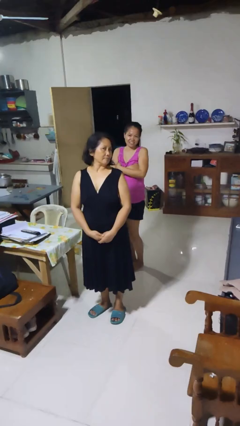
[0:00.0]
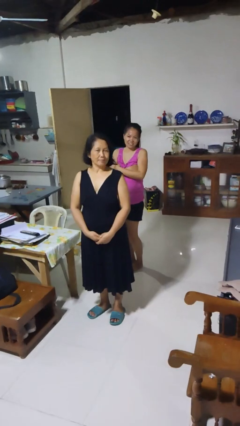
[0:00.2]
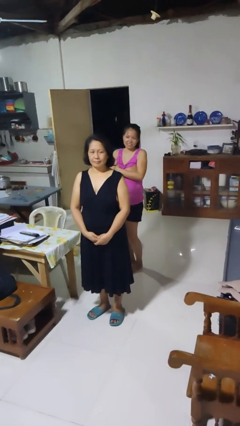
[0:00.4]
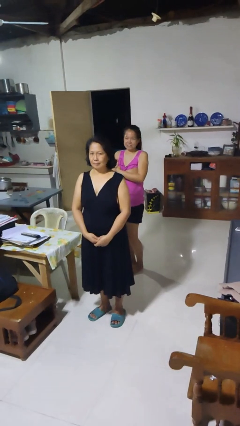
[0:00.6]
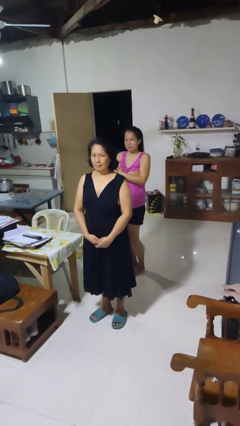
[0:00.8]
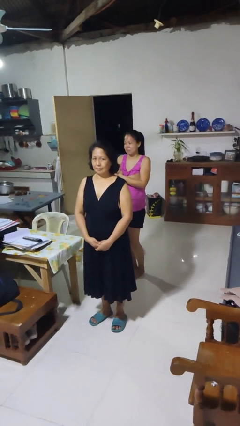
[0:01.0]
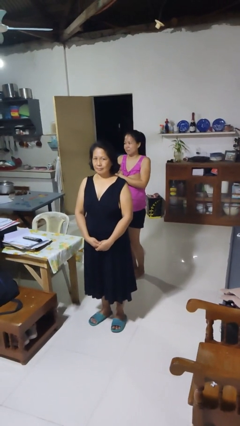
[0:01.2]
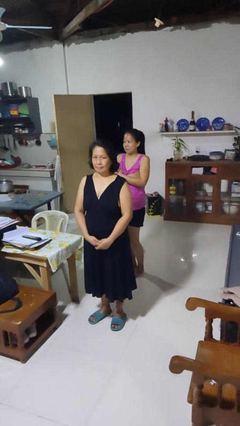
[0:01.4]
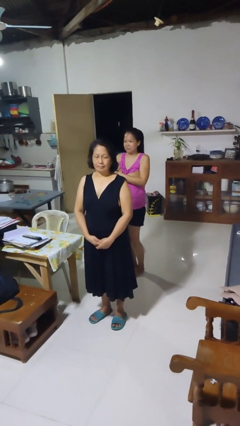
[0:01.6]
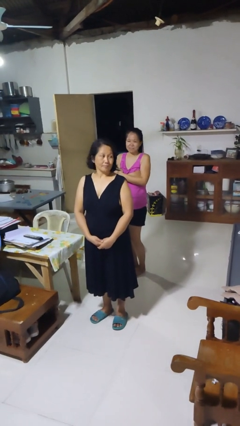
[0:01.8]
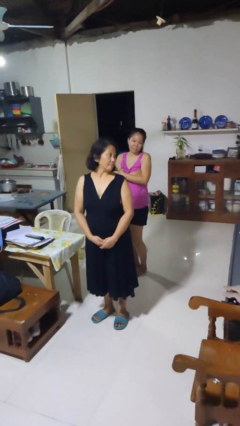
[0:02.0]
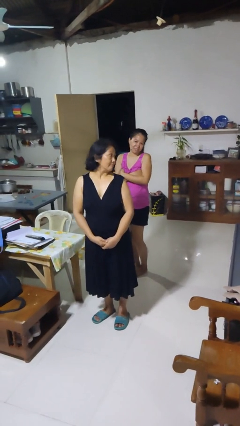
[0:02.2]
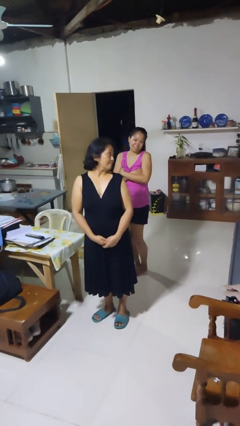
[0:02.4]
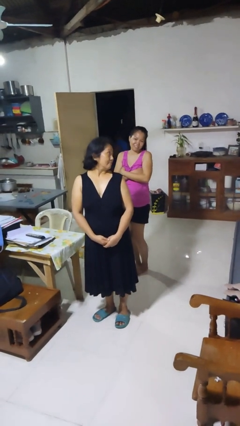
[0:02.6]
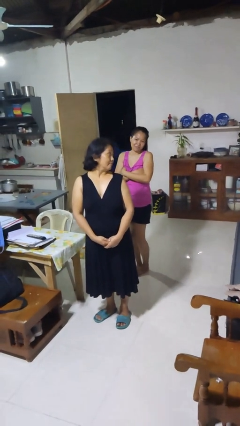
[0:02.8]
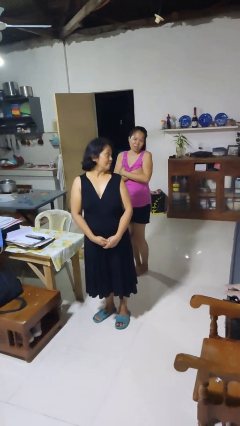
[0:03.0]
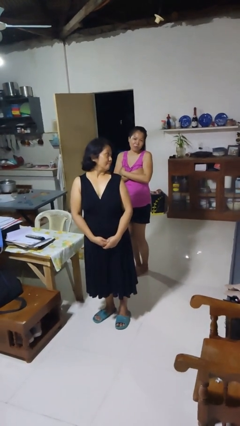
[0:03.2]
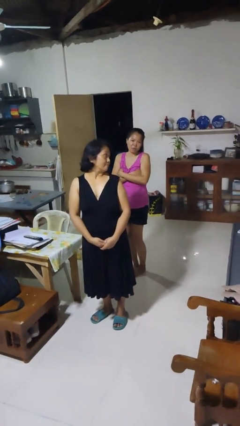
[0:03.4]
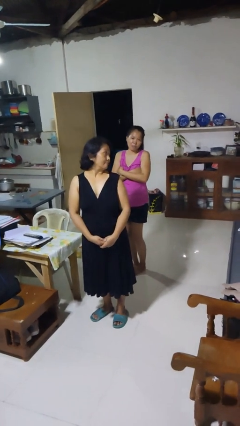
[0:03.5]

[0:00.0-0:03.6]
person looks over shoulder

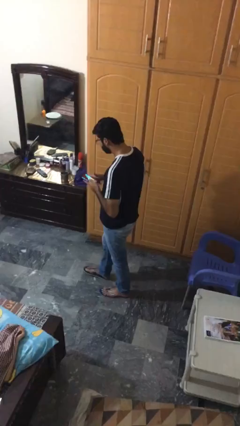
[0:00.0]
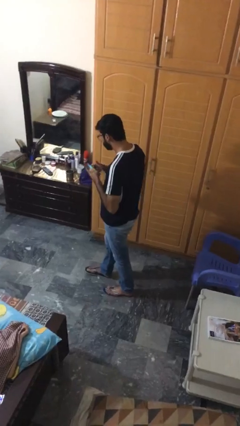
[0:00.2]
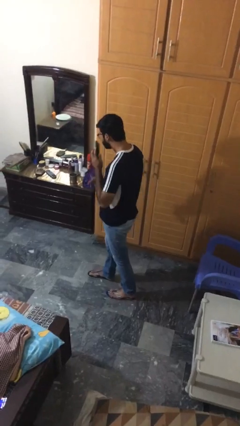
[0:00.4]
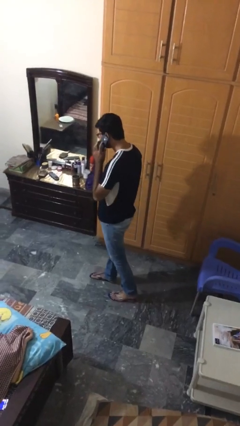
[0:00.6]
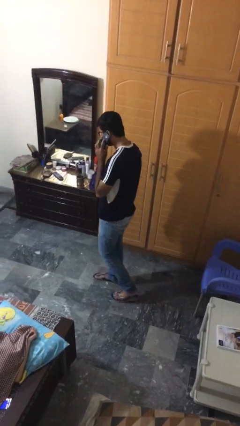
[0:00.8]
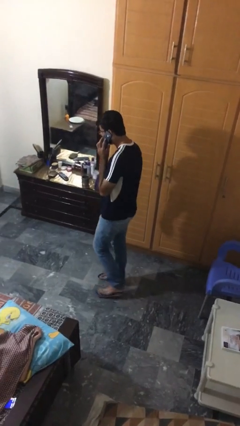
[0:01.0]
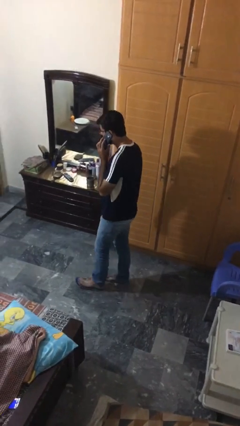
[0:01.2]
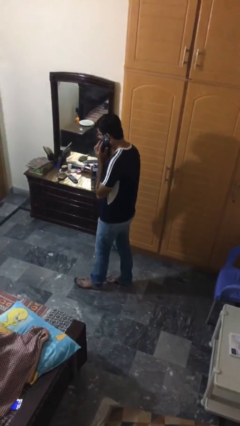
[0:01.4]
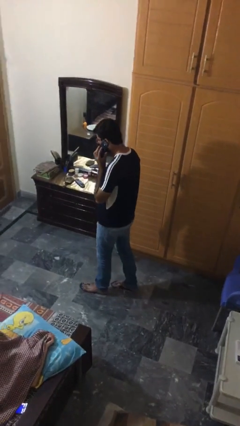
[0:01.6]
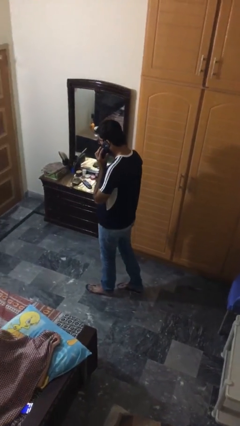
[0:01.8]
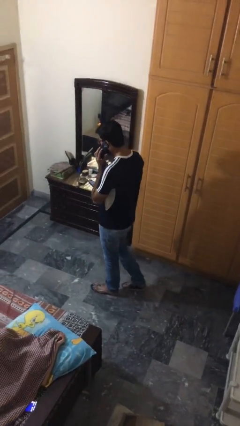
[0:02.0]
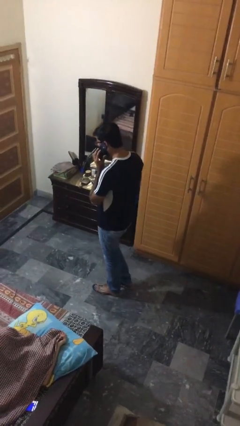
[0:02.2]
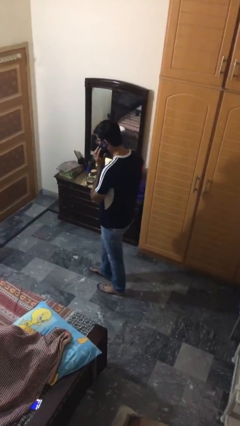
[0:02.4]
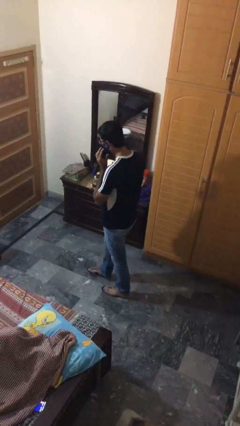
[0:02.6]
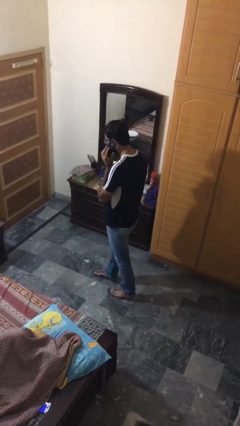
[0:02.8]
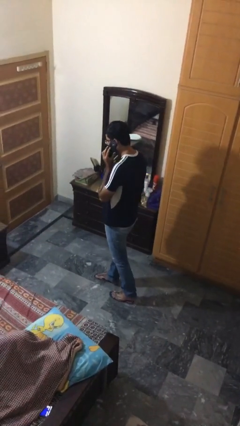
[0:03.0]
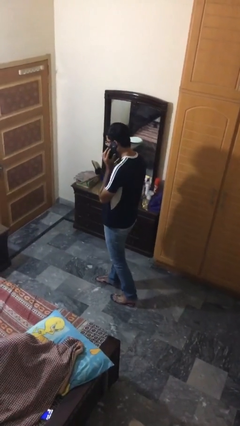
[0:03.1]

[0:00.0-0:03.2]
person talks on phone

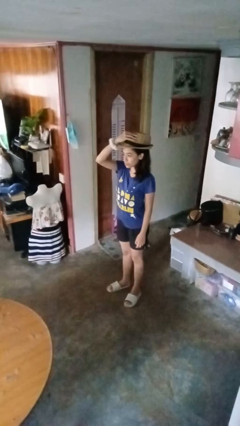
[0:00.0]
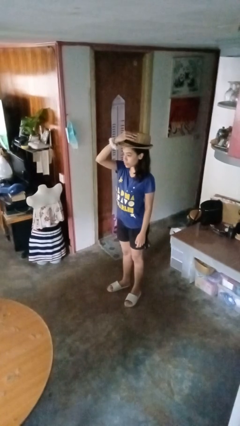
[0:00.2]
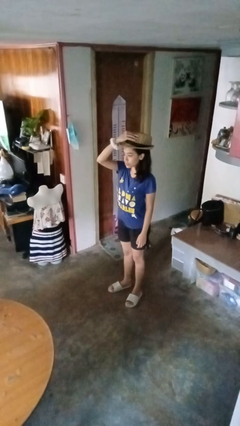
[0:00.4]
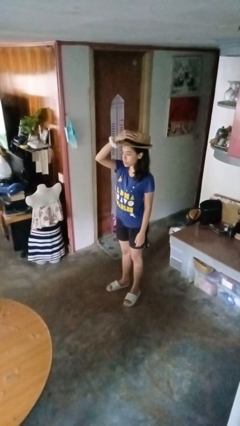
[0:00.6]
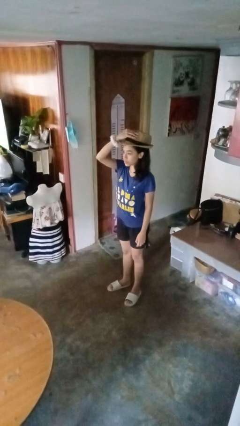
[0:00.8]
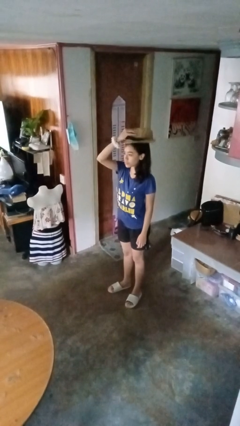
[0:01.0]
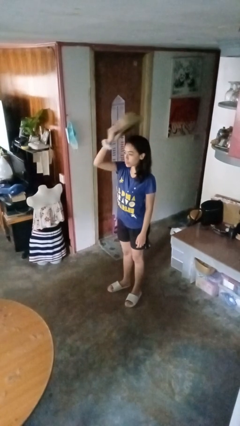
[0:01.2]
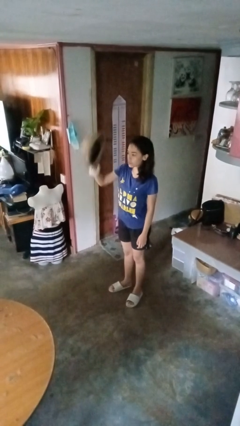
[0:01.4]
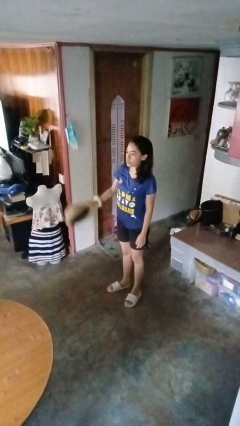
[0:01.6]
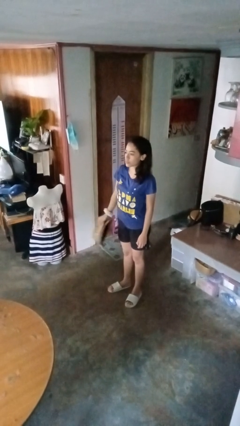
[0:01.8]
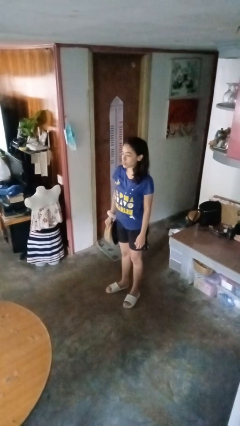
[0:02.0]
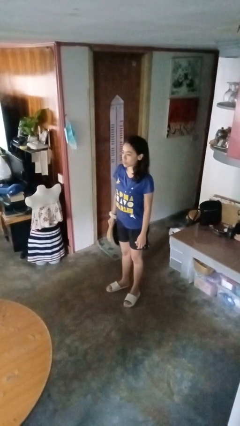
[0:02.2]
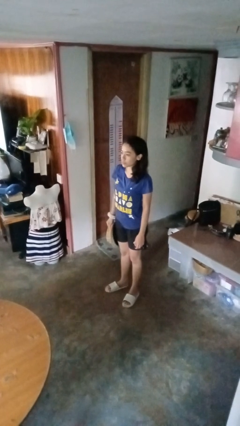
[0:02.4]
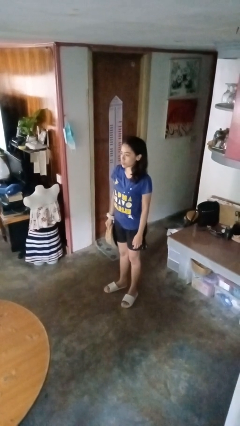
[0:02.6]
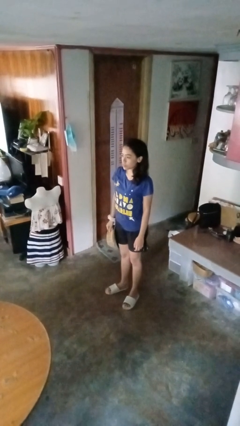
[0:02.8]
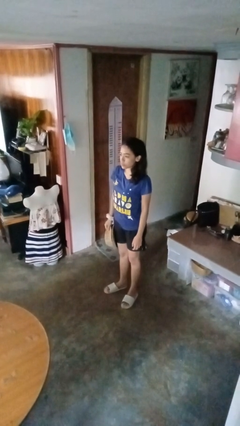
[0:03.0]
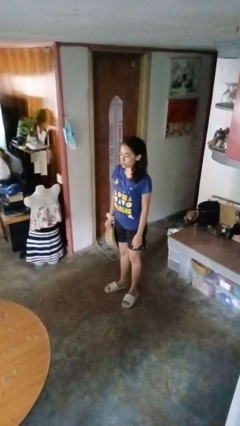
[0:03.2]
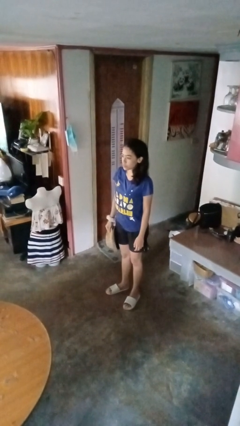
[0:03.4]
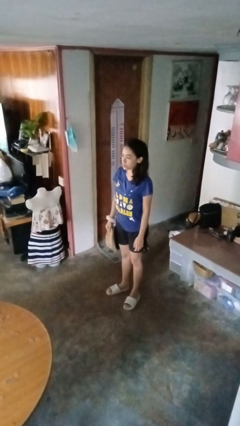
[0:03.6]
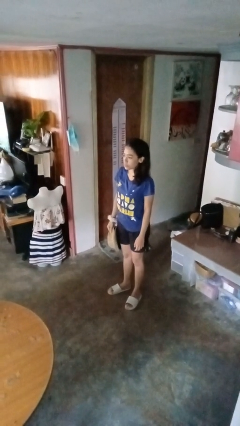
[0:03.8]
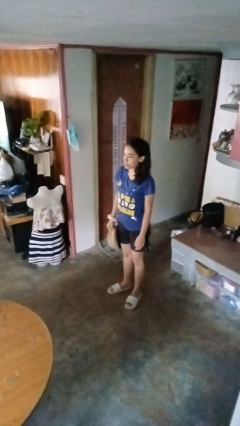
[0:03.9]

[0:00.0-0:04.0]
person takes off hat

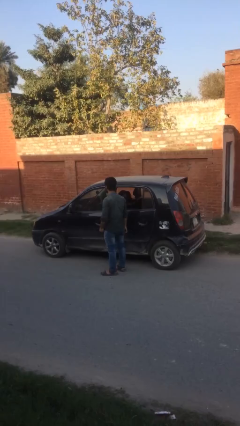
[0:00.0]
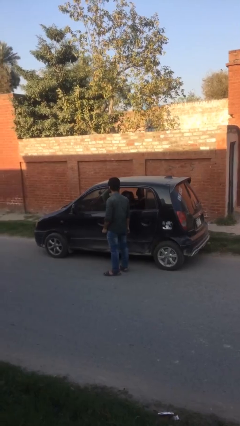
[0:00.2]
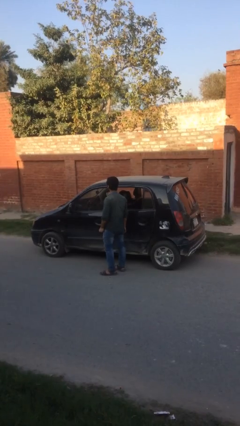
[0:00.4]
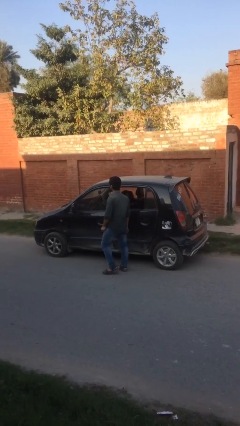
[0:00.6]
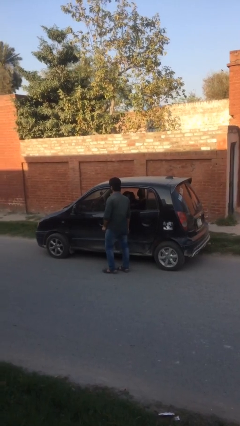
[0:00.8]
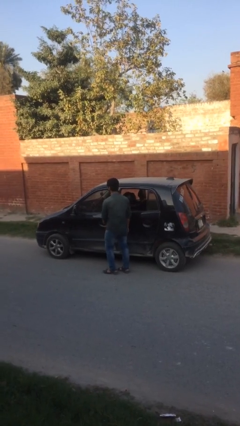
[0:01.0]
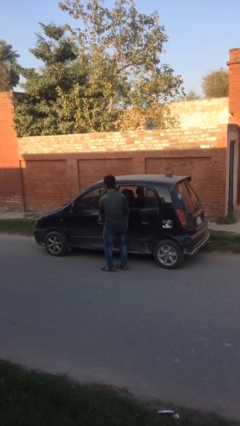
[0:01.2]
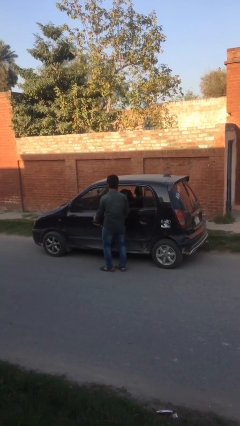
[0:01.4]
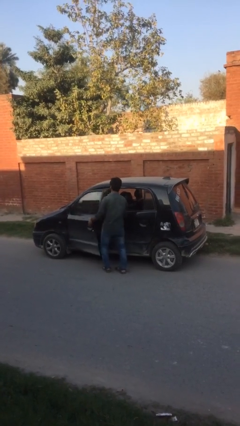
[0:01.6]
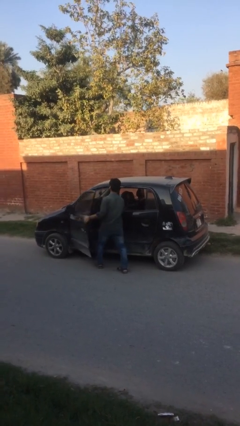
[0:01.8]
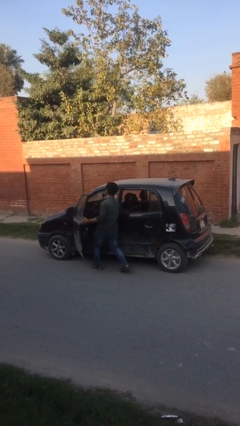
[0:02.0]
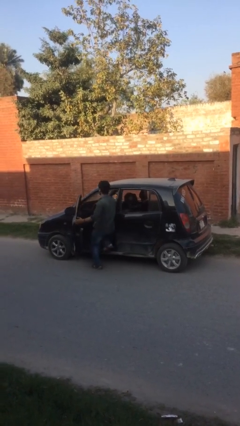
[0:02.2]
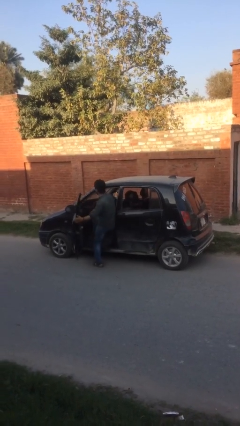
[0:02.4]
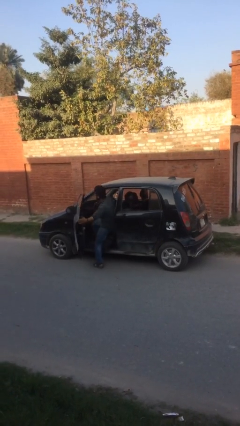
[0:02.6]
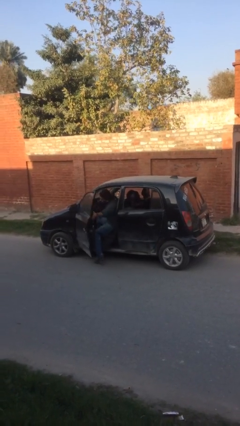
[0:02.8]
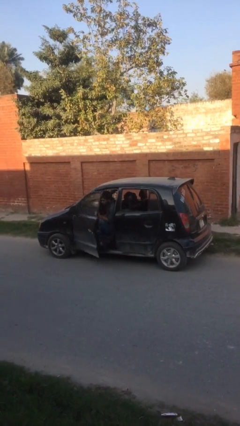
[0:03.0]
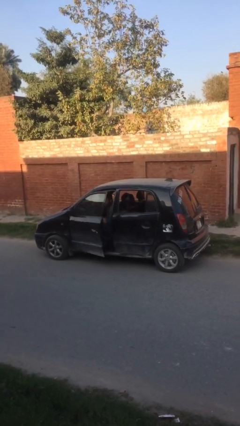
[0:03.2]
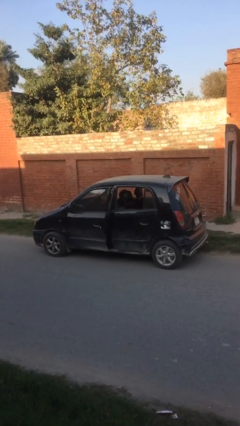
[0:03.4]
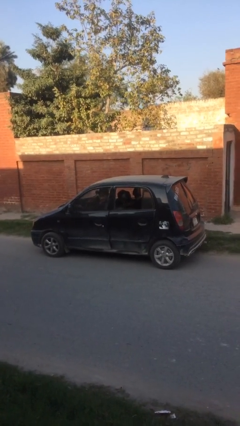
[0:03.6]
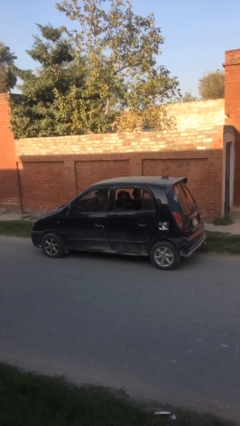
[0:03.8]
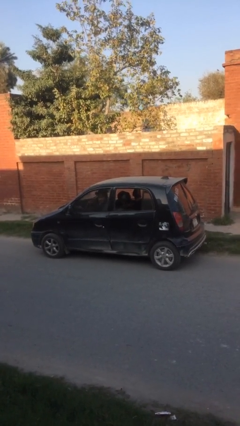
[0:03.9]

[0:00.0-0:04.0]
car picks up person

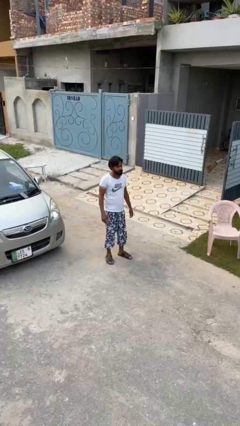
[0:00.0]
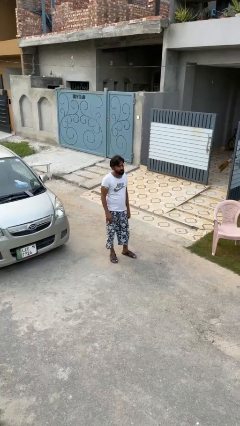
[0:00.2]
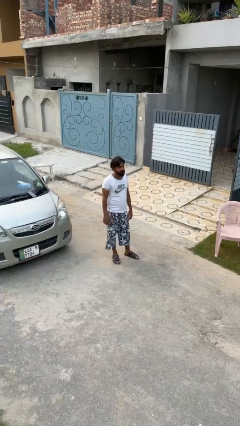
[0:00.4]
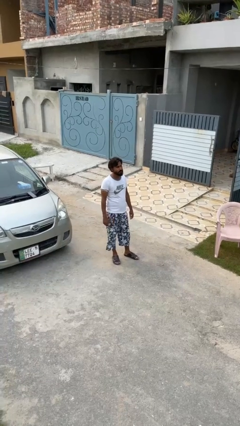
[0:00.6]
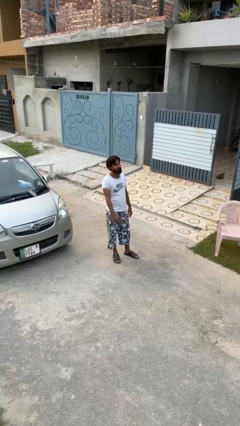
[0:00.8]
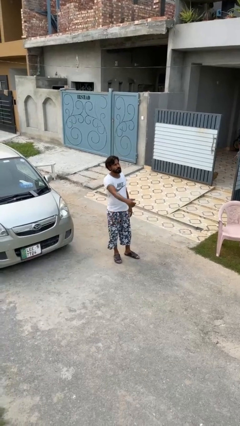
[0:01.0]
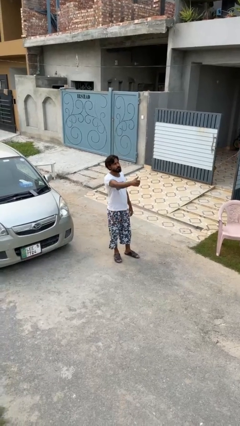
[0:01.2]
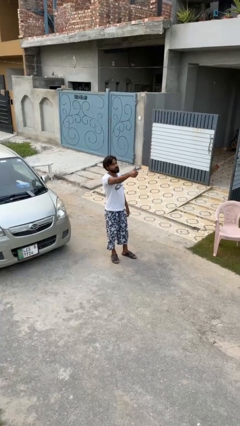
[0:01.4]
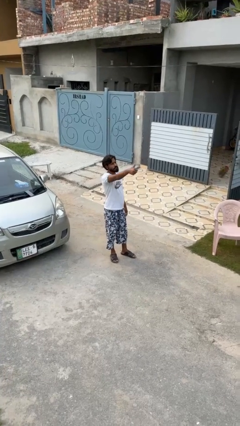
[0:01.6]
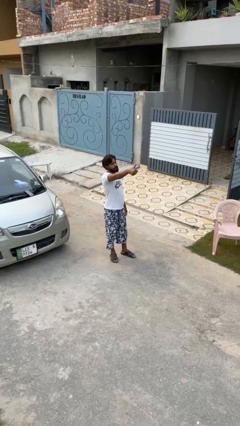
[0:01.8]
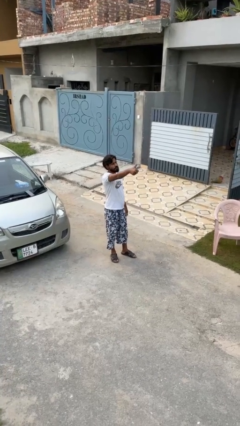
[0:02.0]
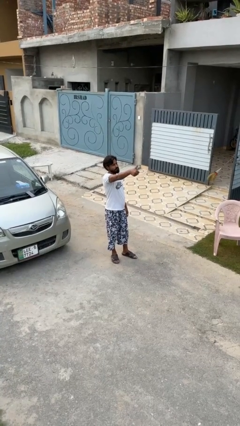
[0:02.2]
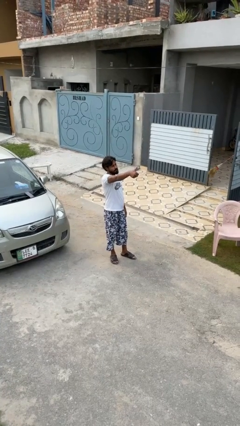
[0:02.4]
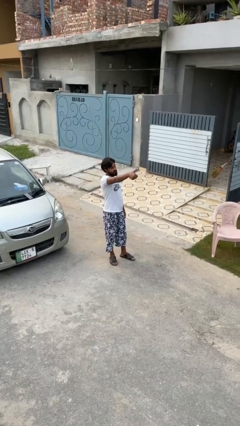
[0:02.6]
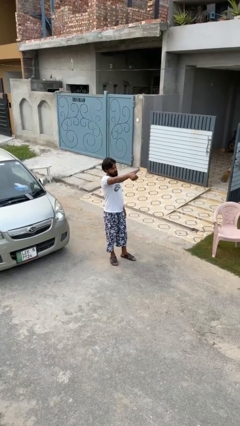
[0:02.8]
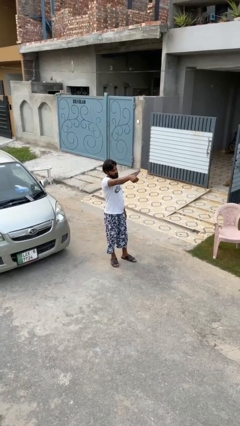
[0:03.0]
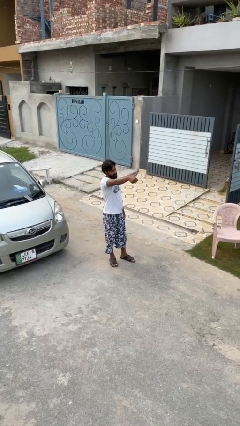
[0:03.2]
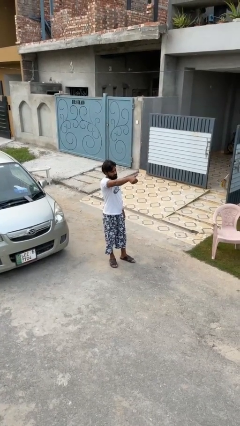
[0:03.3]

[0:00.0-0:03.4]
person gestures thumbs up
